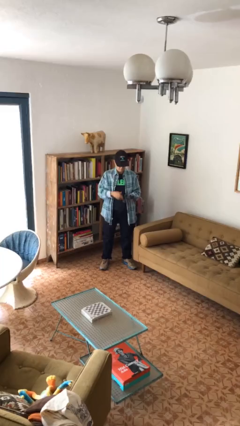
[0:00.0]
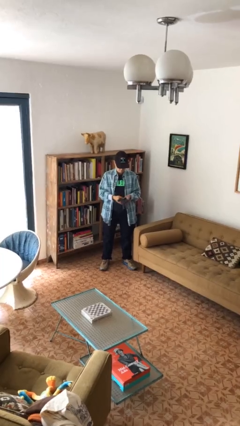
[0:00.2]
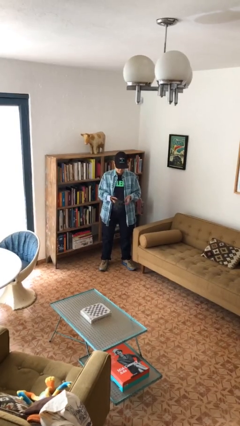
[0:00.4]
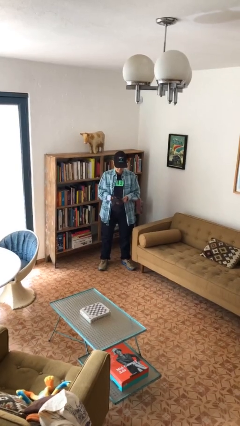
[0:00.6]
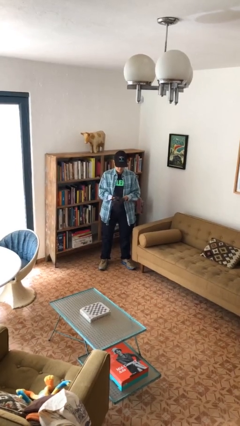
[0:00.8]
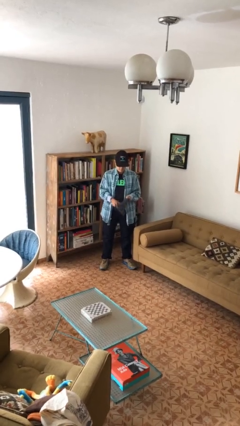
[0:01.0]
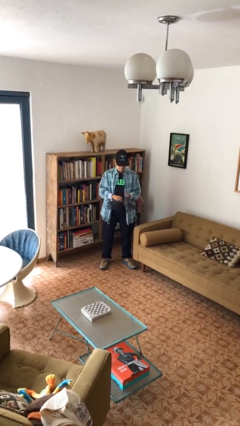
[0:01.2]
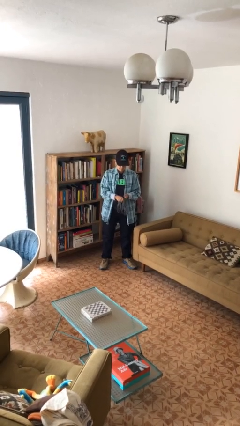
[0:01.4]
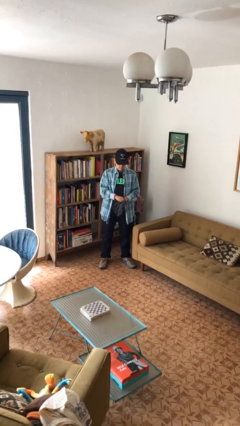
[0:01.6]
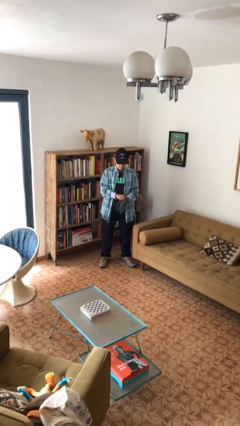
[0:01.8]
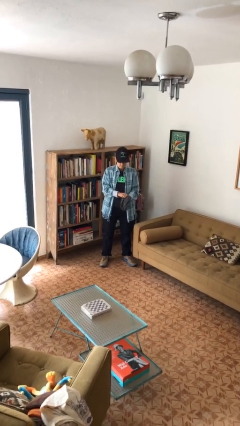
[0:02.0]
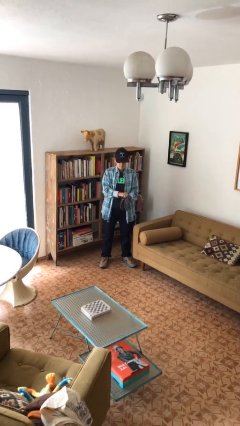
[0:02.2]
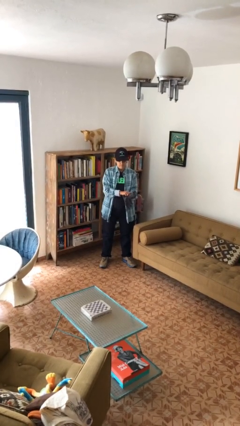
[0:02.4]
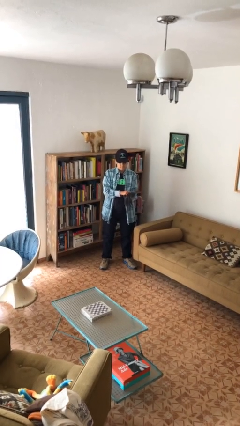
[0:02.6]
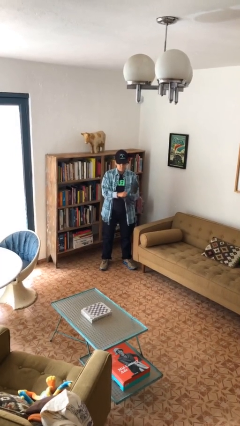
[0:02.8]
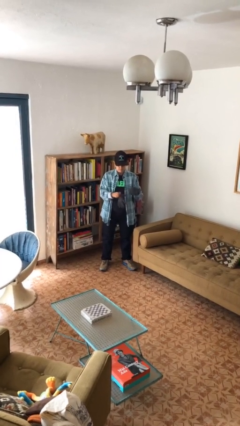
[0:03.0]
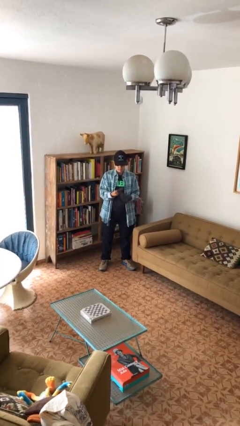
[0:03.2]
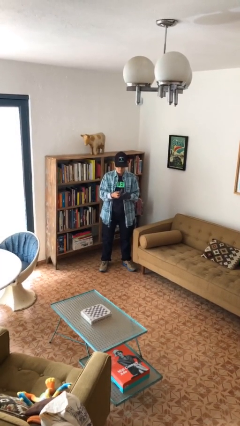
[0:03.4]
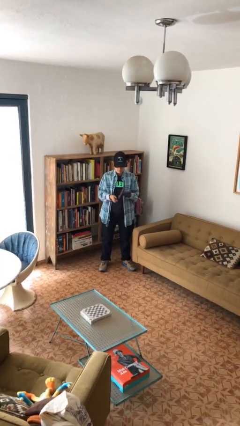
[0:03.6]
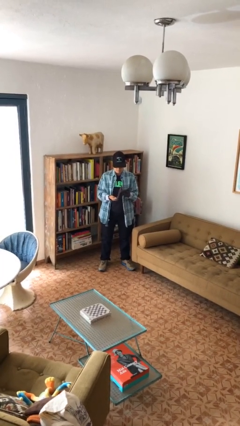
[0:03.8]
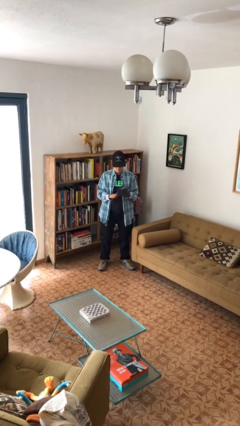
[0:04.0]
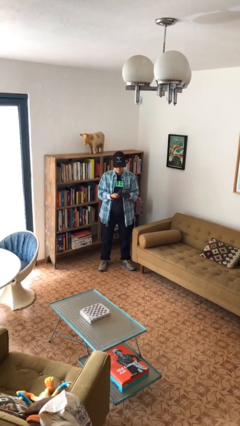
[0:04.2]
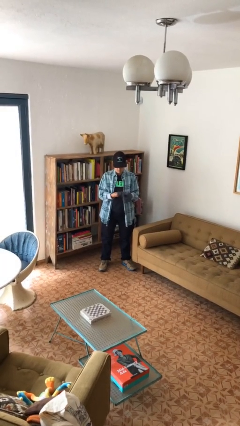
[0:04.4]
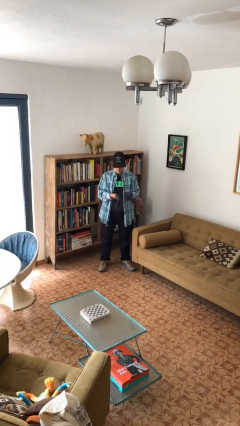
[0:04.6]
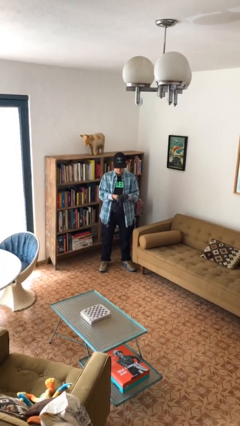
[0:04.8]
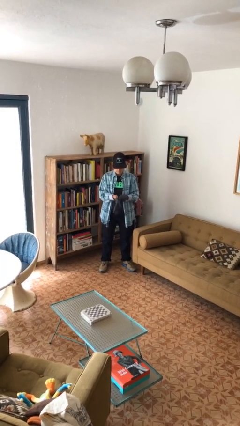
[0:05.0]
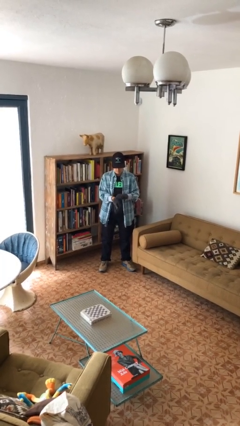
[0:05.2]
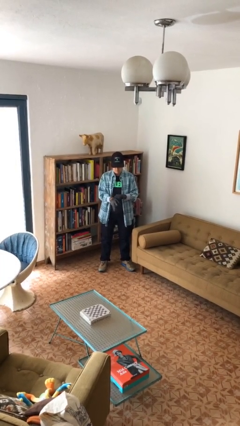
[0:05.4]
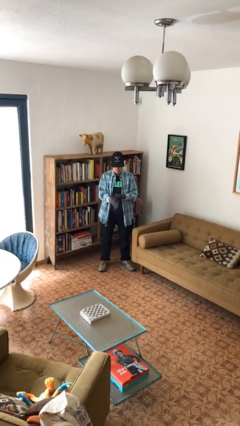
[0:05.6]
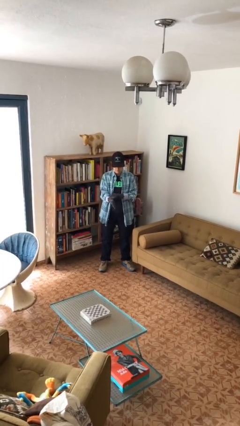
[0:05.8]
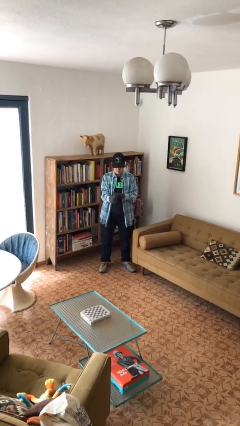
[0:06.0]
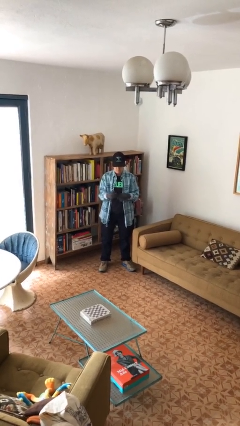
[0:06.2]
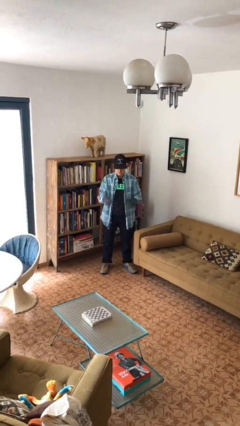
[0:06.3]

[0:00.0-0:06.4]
person puts on gloves

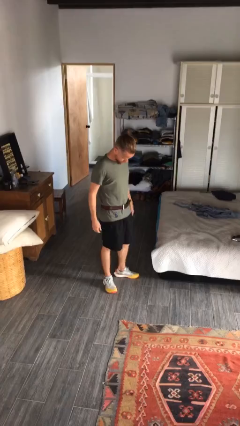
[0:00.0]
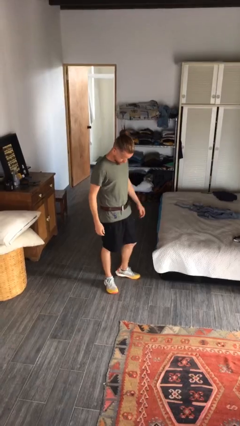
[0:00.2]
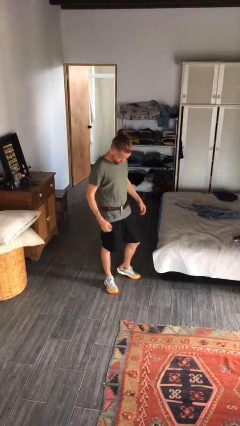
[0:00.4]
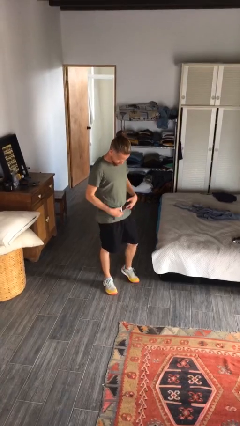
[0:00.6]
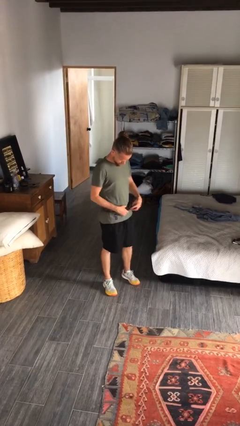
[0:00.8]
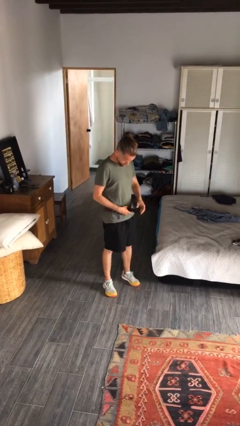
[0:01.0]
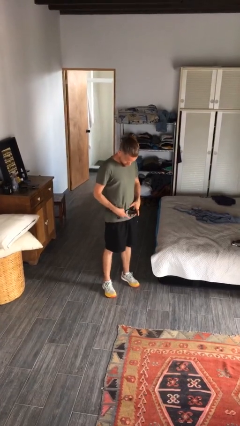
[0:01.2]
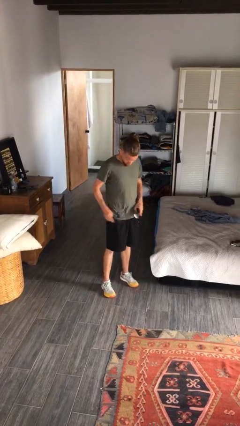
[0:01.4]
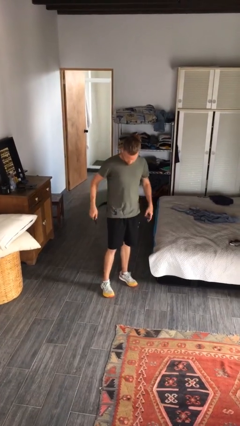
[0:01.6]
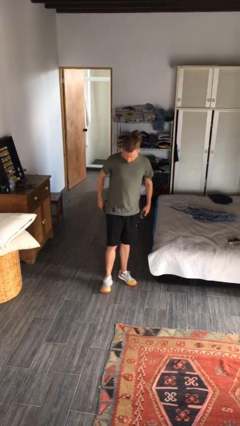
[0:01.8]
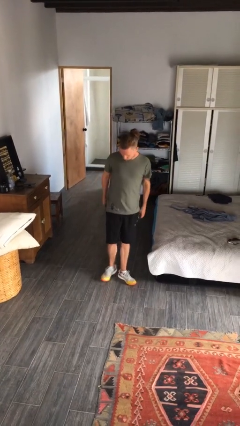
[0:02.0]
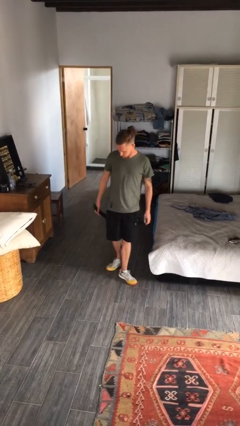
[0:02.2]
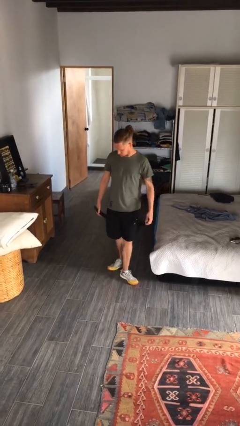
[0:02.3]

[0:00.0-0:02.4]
person takes off belt

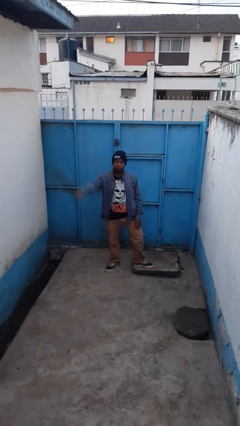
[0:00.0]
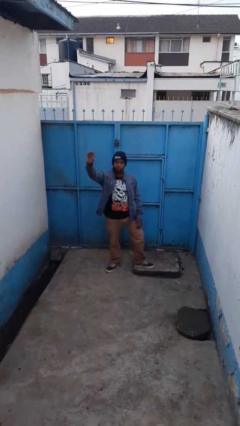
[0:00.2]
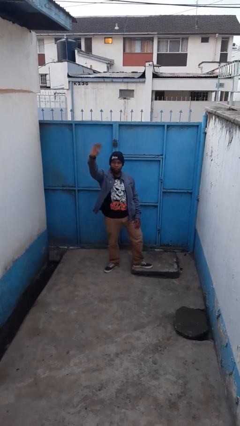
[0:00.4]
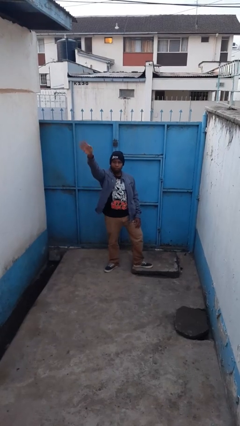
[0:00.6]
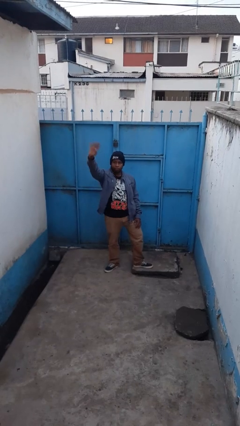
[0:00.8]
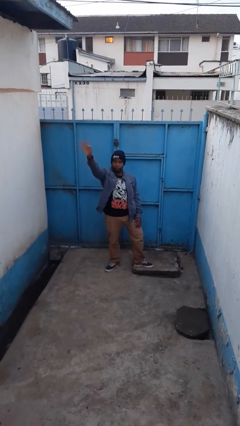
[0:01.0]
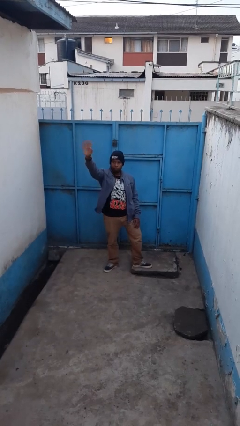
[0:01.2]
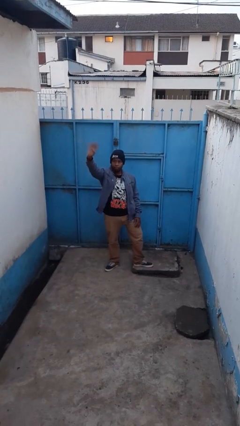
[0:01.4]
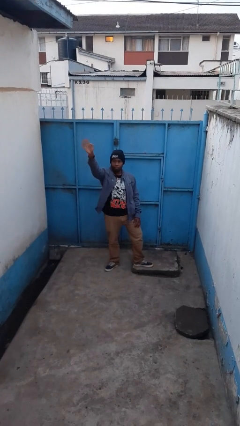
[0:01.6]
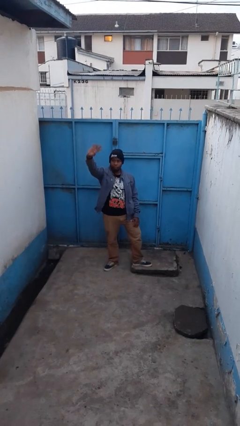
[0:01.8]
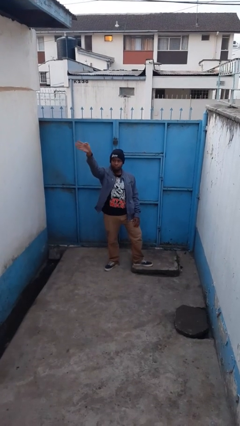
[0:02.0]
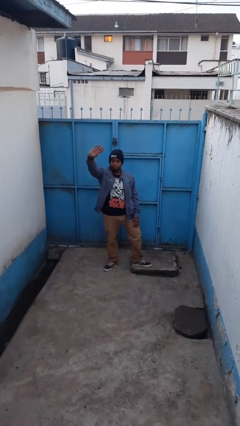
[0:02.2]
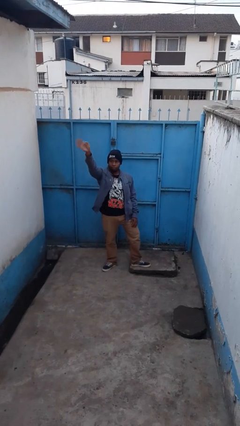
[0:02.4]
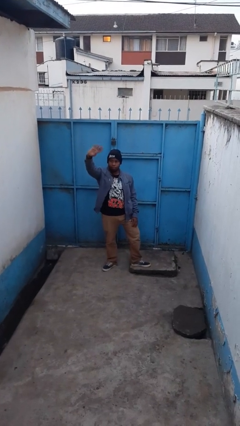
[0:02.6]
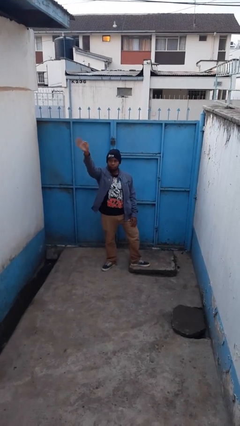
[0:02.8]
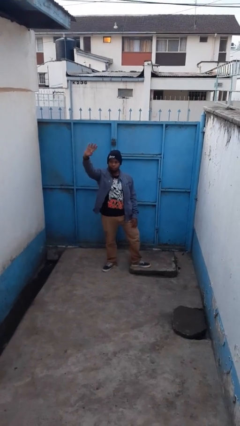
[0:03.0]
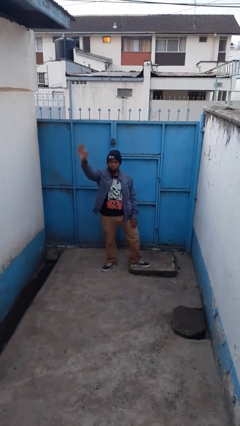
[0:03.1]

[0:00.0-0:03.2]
person waves at person

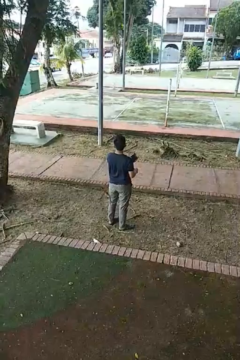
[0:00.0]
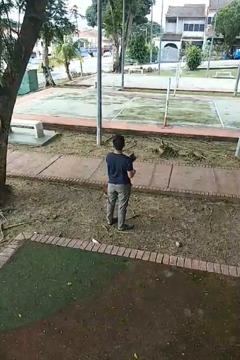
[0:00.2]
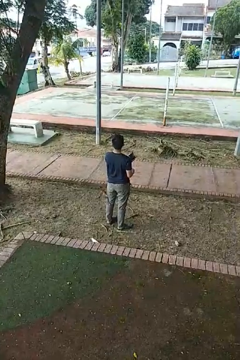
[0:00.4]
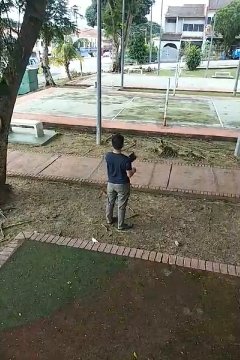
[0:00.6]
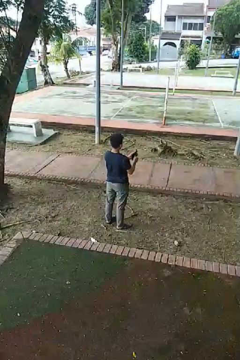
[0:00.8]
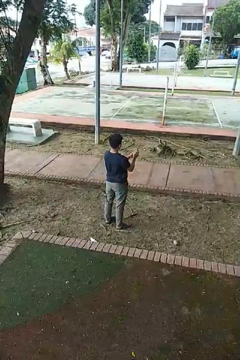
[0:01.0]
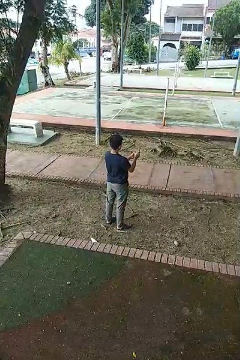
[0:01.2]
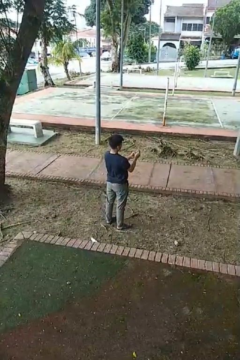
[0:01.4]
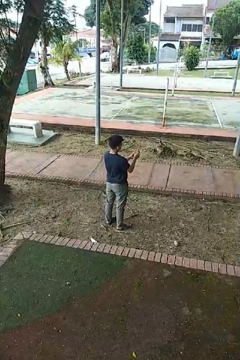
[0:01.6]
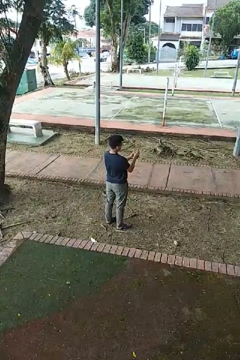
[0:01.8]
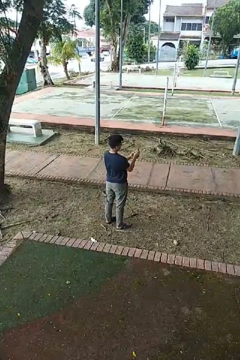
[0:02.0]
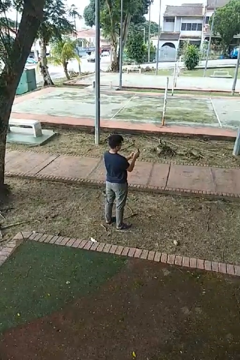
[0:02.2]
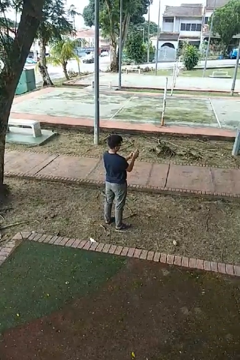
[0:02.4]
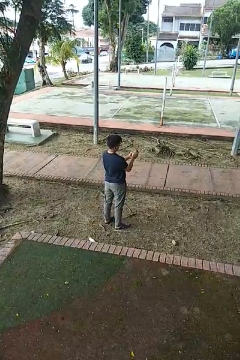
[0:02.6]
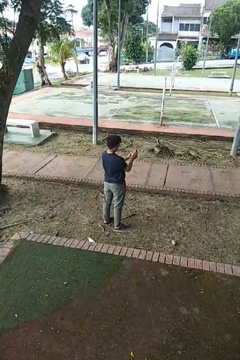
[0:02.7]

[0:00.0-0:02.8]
person searches in purse

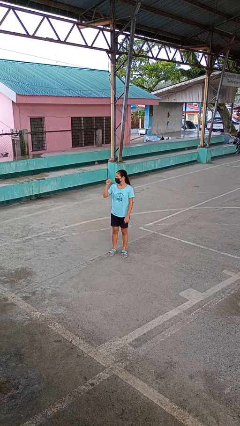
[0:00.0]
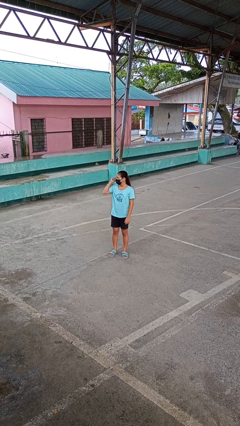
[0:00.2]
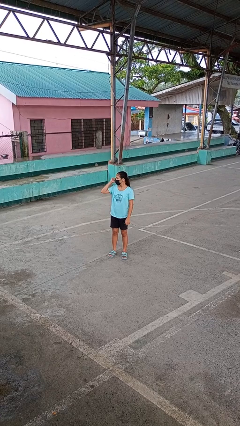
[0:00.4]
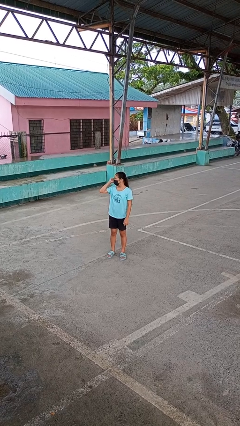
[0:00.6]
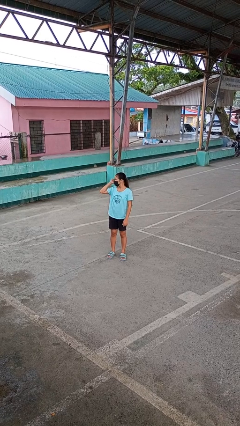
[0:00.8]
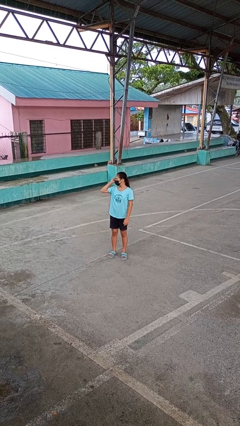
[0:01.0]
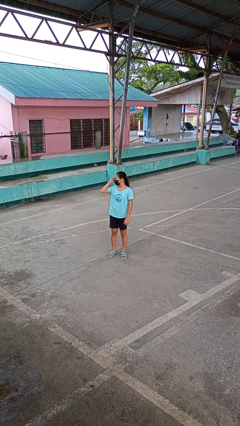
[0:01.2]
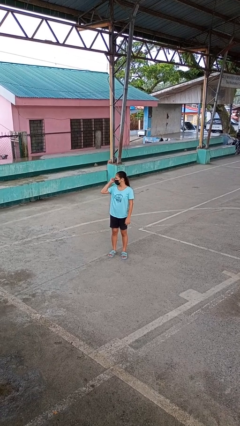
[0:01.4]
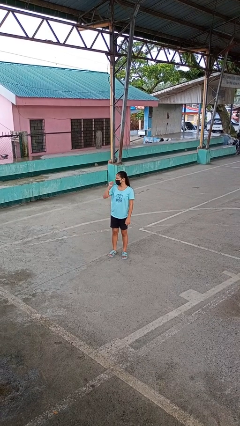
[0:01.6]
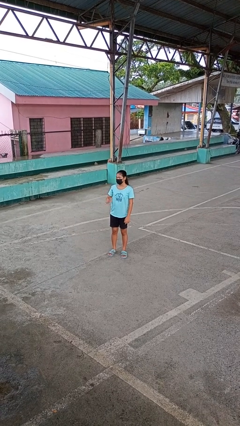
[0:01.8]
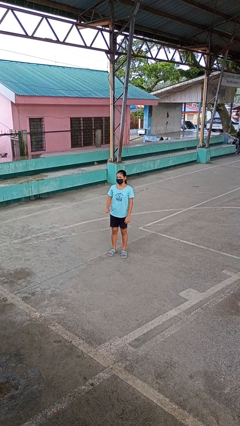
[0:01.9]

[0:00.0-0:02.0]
person gestures behind me

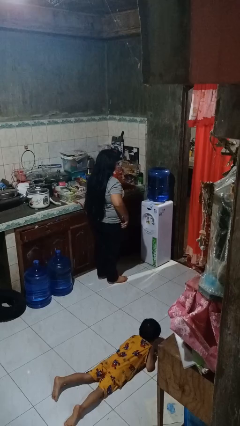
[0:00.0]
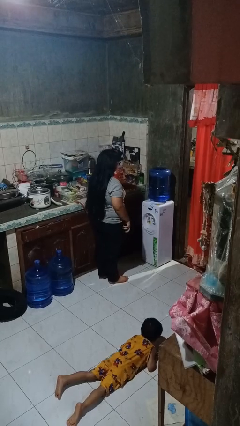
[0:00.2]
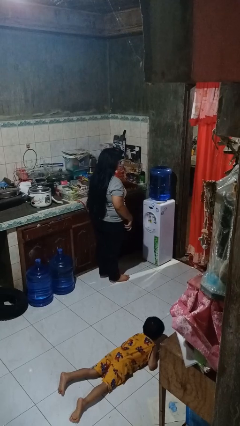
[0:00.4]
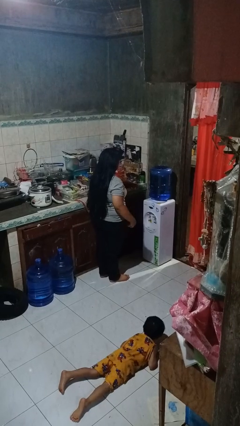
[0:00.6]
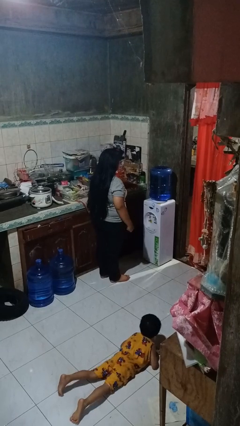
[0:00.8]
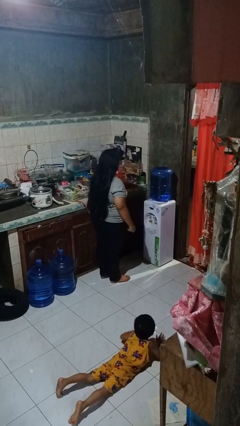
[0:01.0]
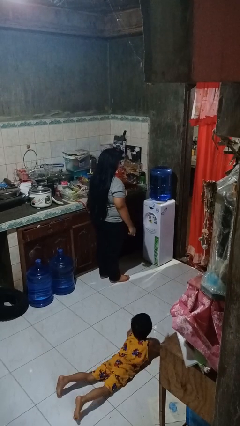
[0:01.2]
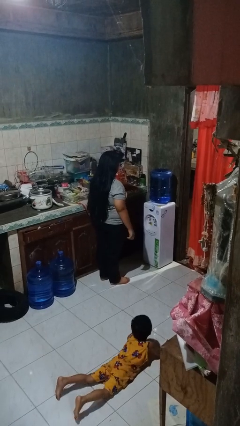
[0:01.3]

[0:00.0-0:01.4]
person puts phone into pocket
